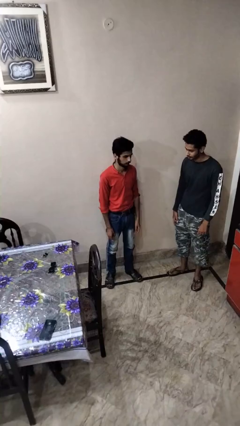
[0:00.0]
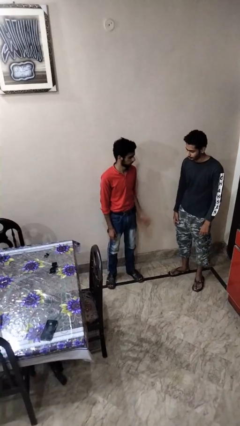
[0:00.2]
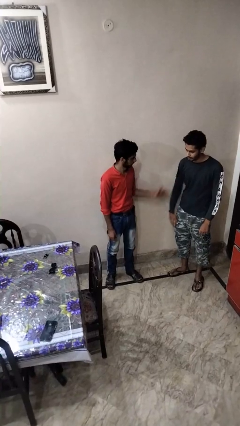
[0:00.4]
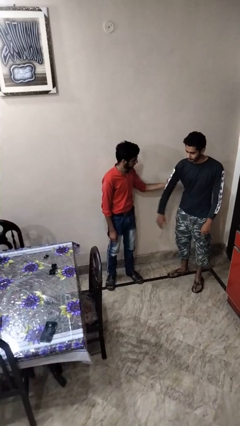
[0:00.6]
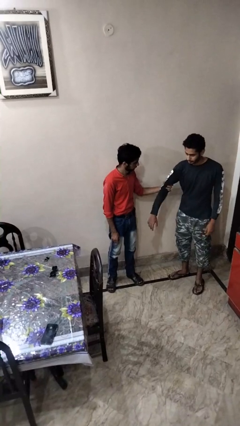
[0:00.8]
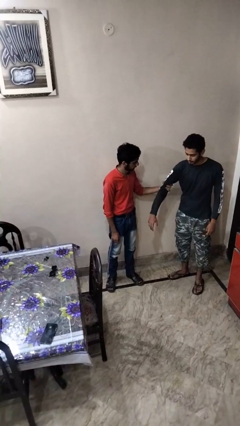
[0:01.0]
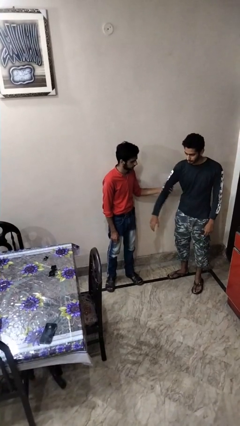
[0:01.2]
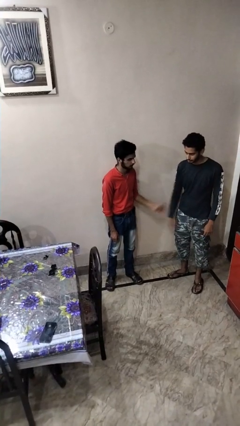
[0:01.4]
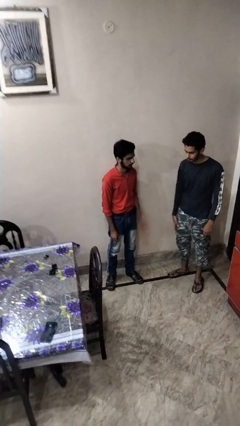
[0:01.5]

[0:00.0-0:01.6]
person grabs person by bicep

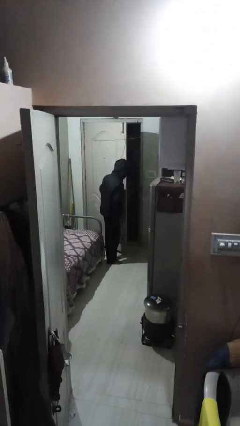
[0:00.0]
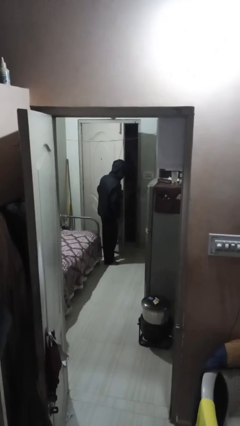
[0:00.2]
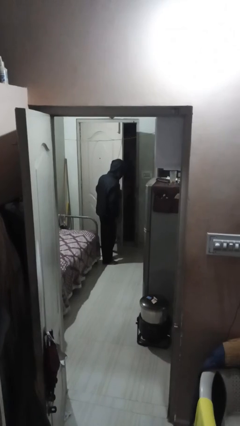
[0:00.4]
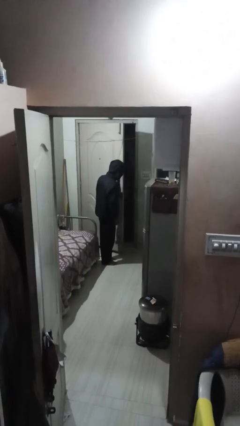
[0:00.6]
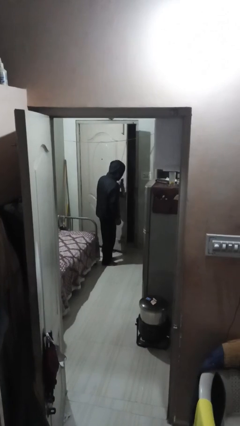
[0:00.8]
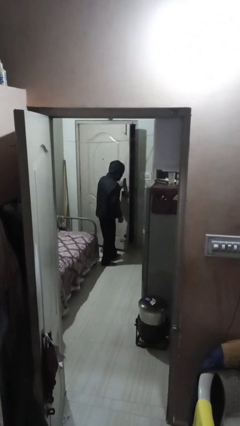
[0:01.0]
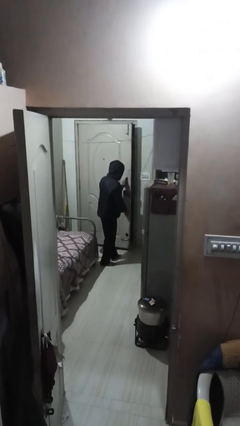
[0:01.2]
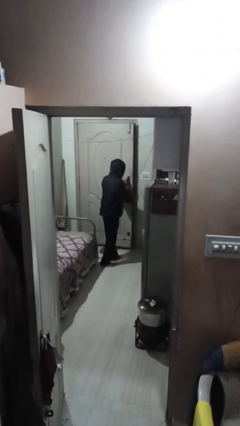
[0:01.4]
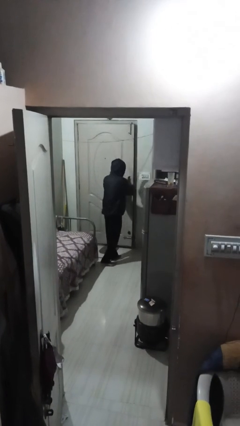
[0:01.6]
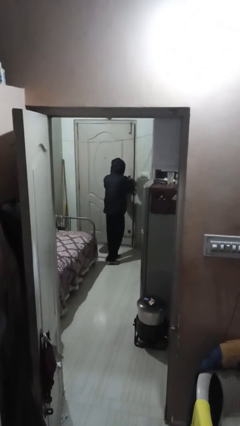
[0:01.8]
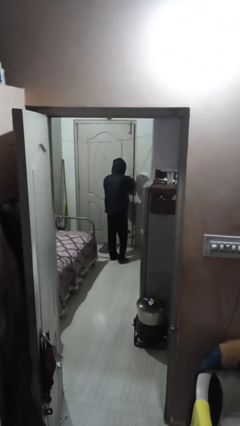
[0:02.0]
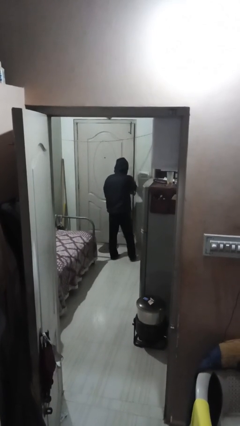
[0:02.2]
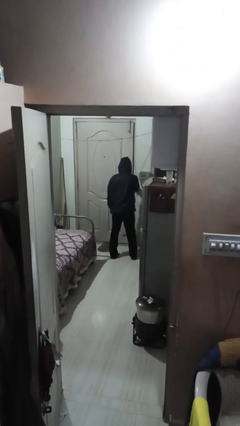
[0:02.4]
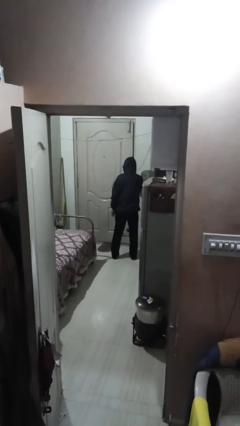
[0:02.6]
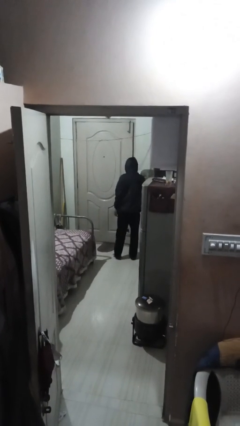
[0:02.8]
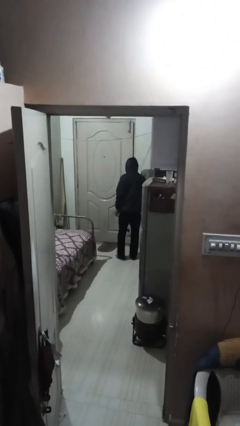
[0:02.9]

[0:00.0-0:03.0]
person closes facility door

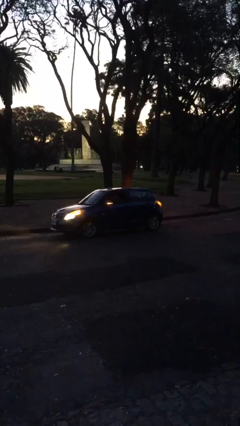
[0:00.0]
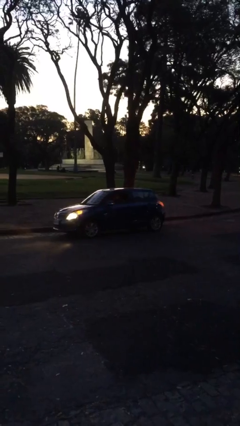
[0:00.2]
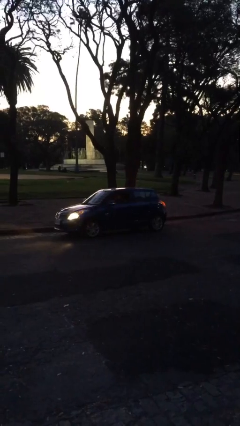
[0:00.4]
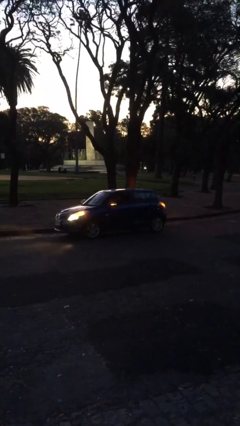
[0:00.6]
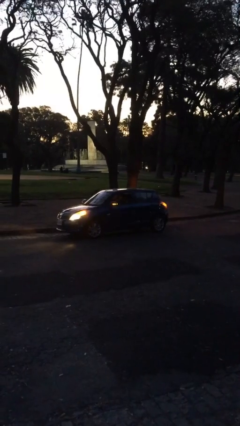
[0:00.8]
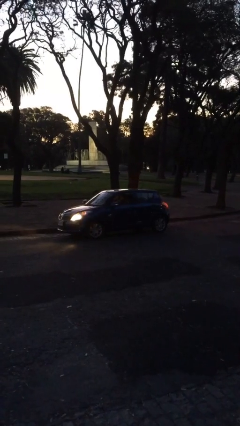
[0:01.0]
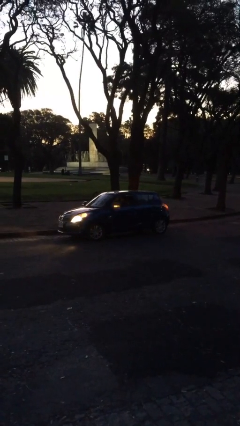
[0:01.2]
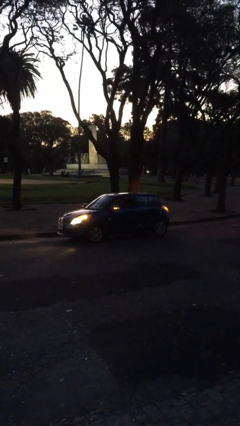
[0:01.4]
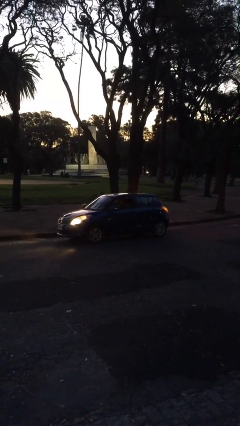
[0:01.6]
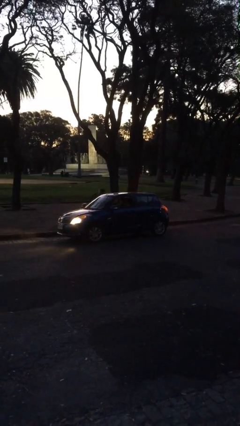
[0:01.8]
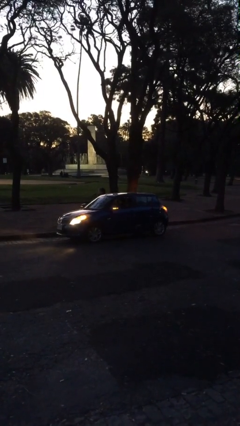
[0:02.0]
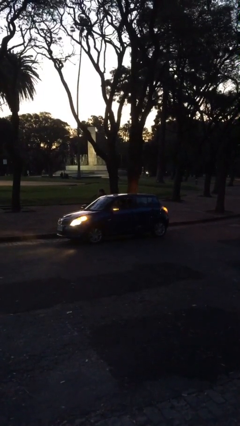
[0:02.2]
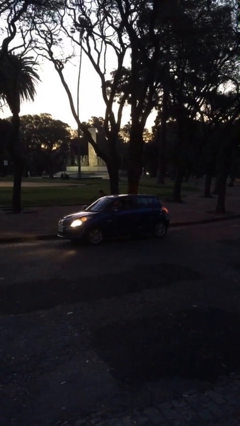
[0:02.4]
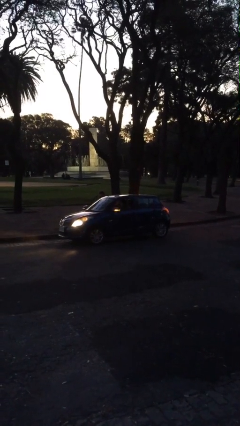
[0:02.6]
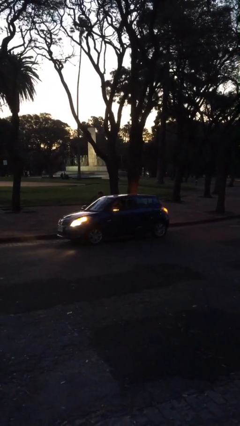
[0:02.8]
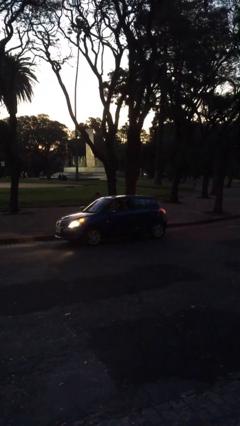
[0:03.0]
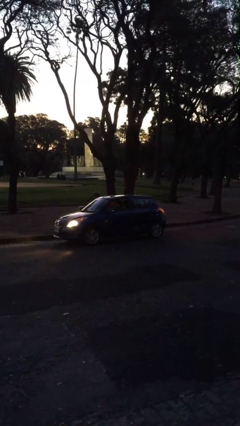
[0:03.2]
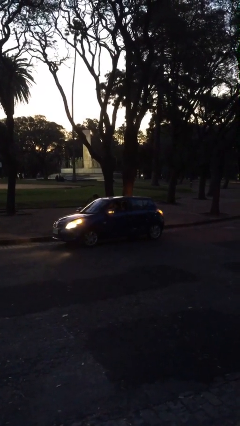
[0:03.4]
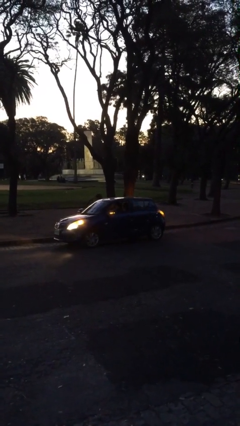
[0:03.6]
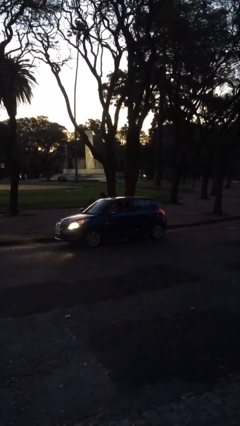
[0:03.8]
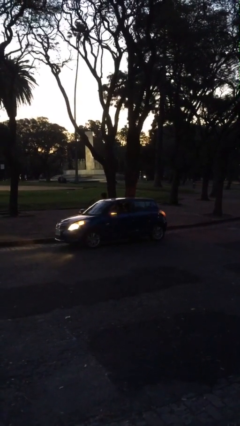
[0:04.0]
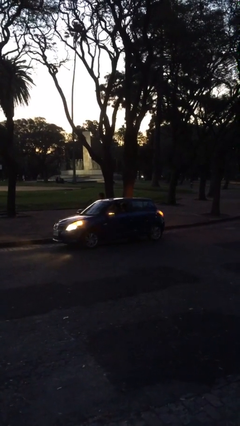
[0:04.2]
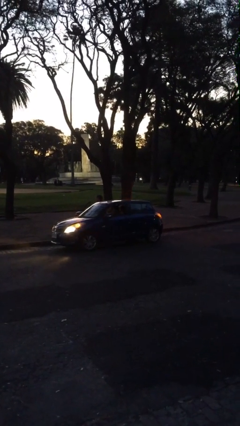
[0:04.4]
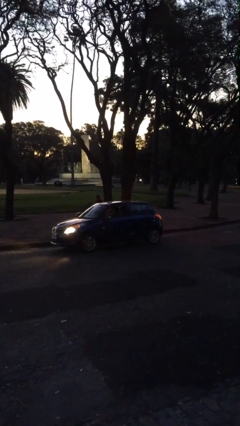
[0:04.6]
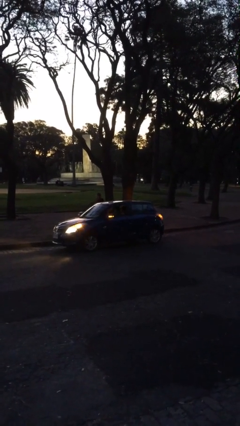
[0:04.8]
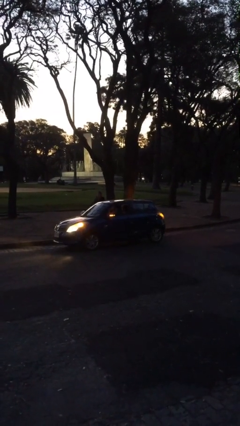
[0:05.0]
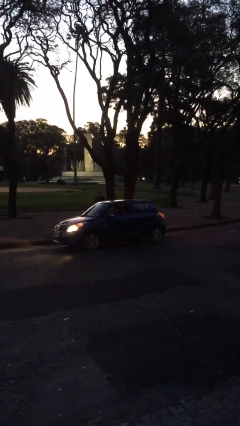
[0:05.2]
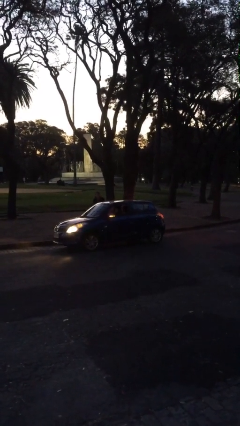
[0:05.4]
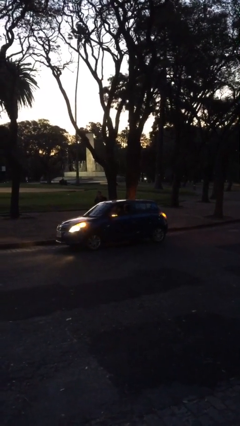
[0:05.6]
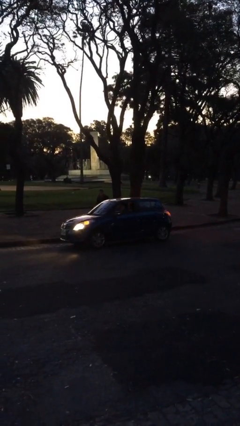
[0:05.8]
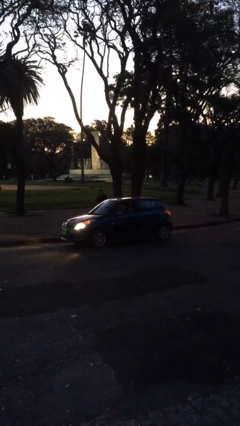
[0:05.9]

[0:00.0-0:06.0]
car drops off person

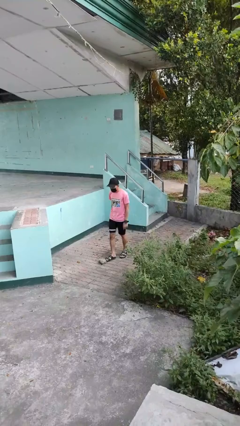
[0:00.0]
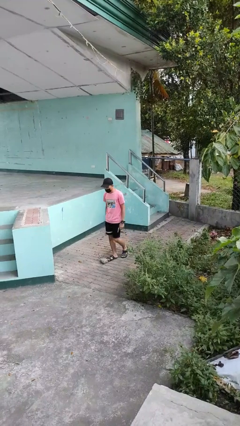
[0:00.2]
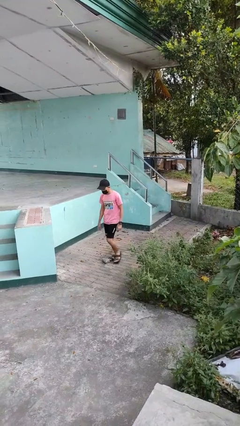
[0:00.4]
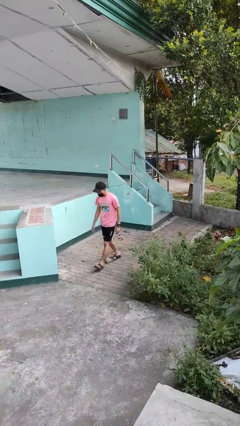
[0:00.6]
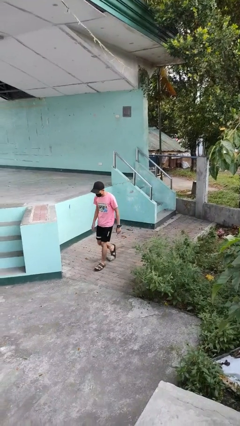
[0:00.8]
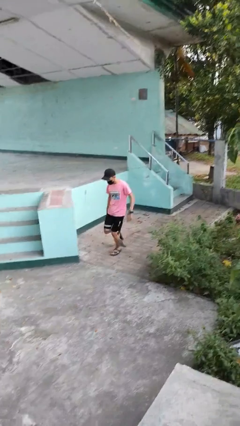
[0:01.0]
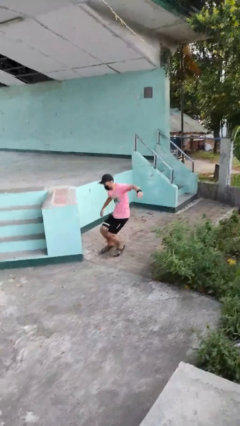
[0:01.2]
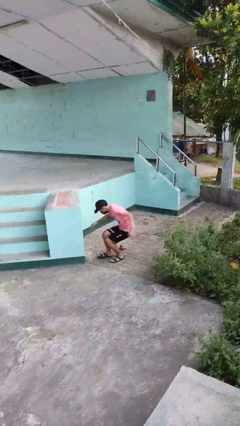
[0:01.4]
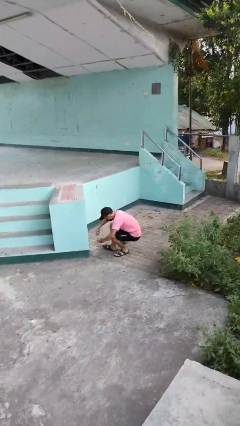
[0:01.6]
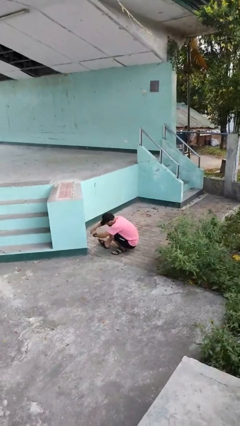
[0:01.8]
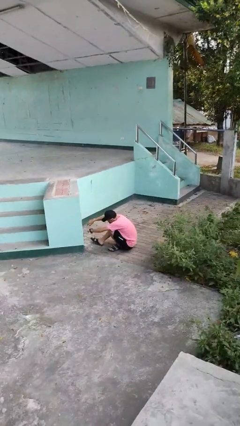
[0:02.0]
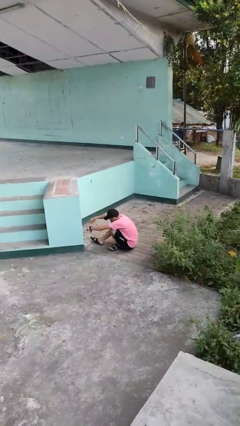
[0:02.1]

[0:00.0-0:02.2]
person trips on object on floor

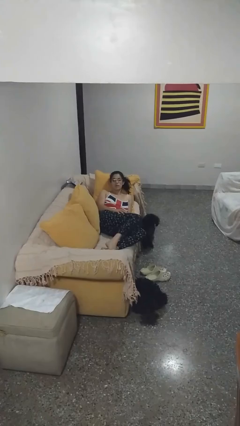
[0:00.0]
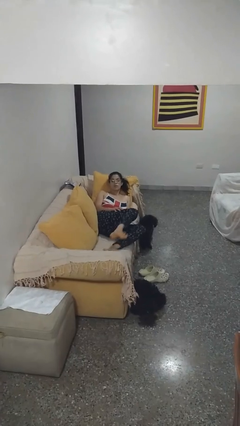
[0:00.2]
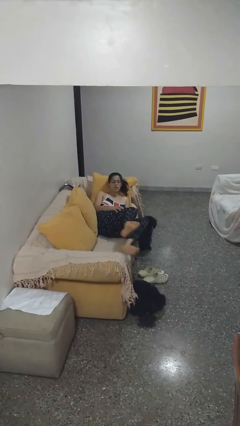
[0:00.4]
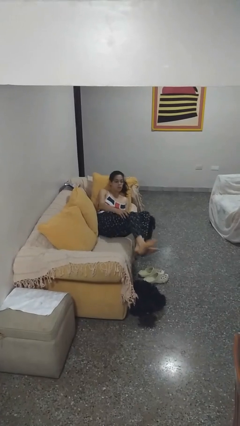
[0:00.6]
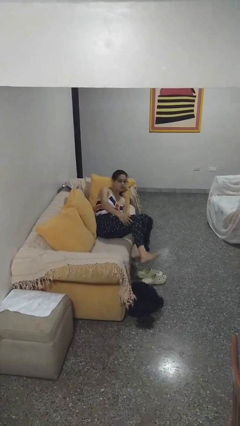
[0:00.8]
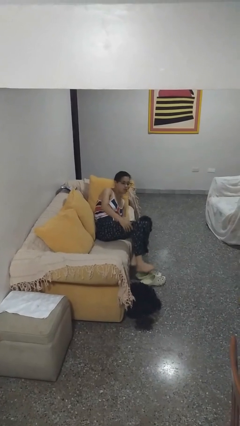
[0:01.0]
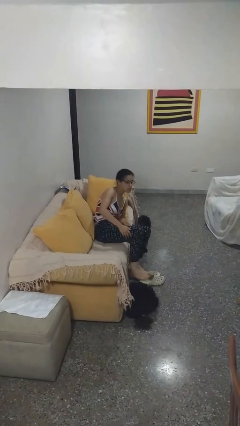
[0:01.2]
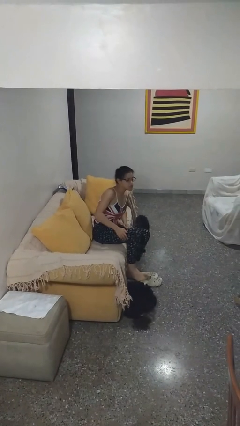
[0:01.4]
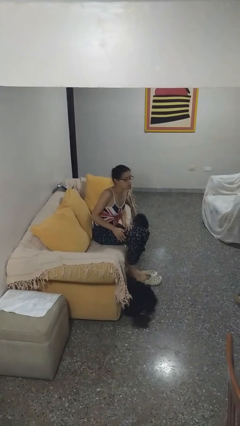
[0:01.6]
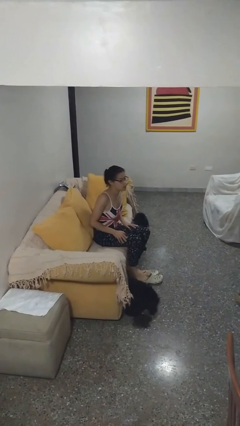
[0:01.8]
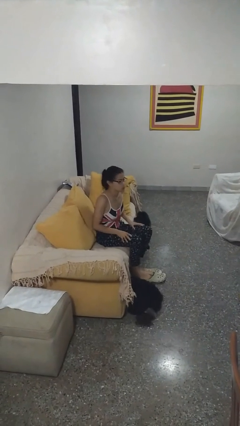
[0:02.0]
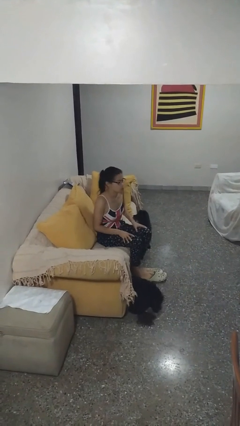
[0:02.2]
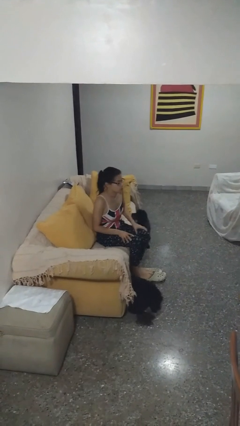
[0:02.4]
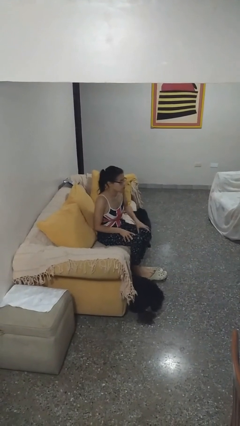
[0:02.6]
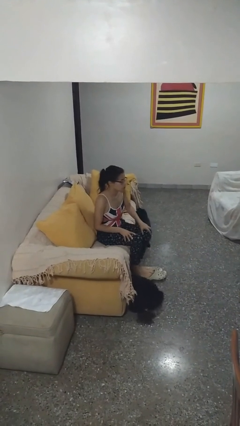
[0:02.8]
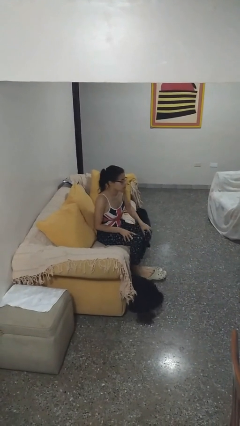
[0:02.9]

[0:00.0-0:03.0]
person stands up

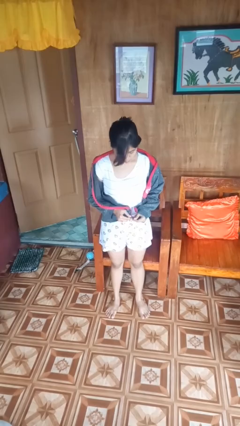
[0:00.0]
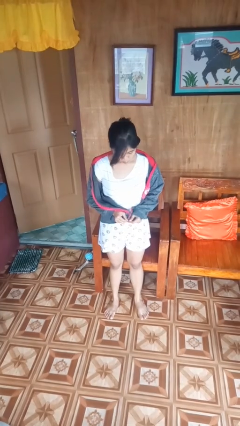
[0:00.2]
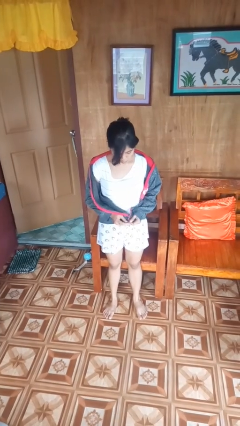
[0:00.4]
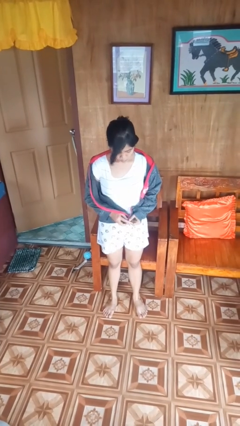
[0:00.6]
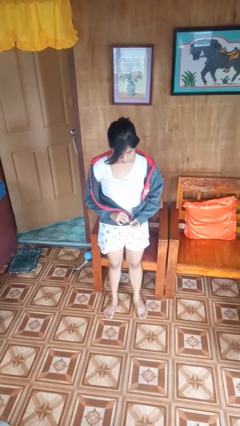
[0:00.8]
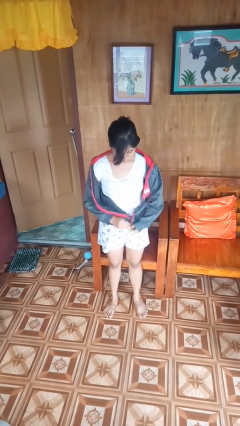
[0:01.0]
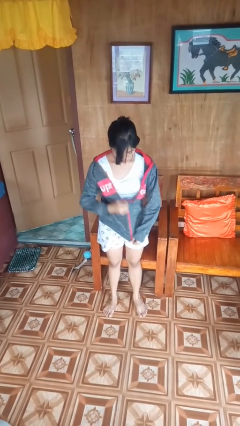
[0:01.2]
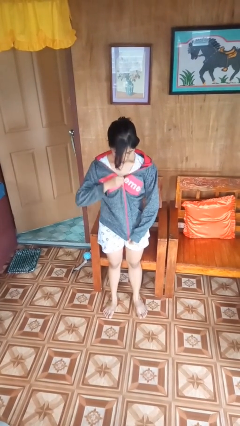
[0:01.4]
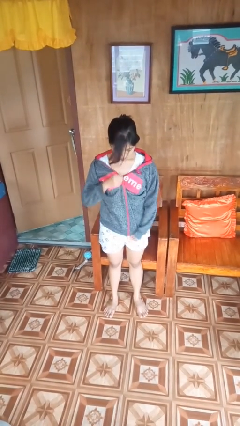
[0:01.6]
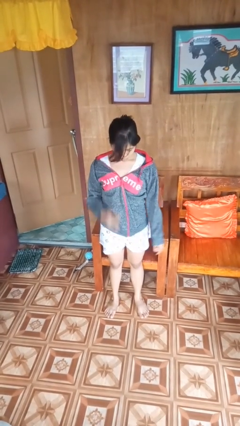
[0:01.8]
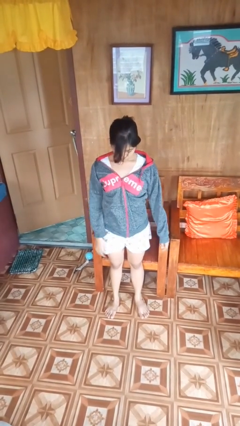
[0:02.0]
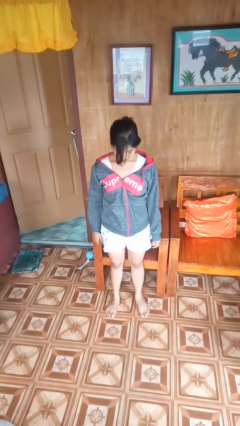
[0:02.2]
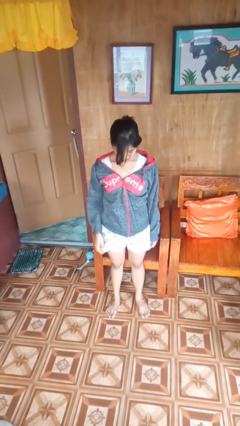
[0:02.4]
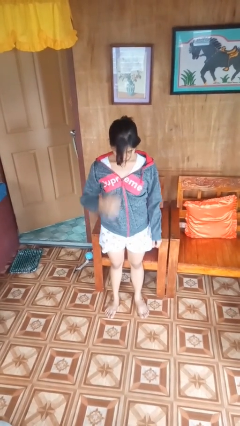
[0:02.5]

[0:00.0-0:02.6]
person zips up jacket
